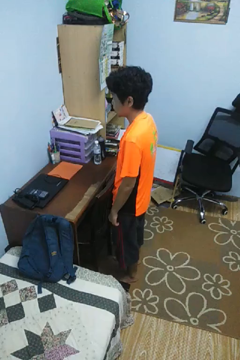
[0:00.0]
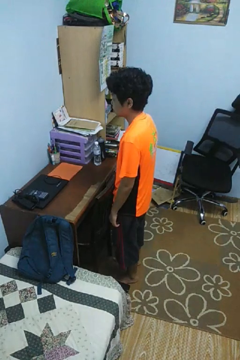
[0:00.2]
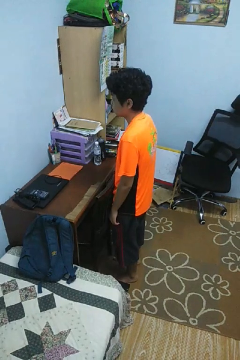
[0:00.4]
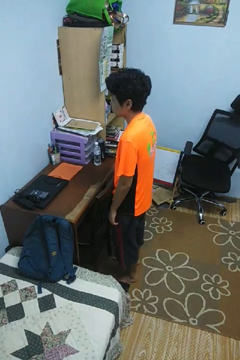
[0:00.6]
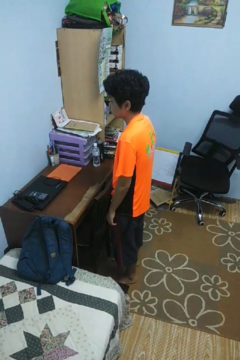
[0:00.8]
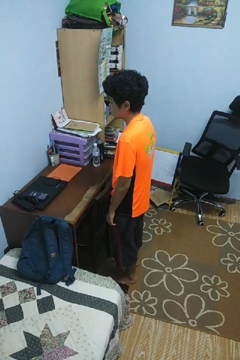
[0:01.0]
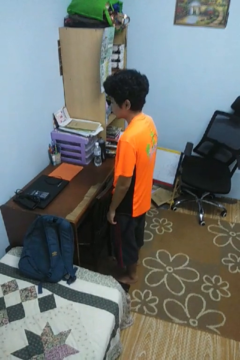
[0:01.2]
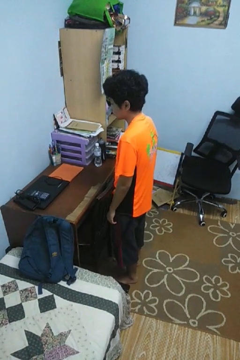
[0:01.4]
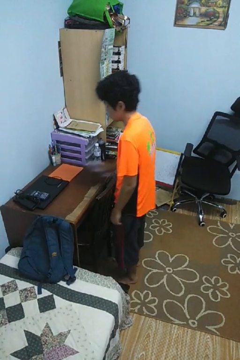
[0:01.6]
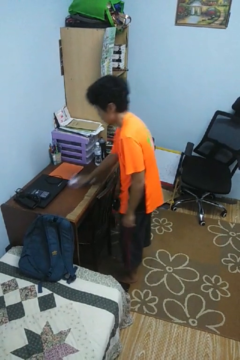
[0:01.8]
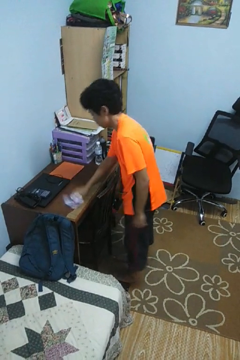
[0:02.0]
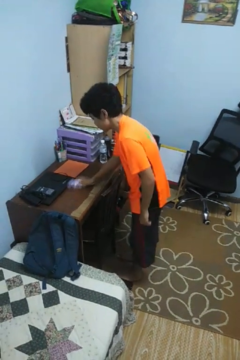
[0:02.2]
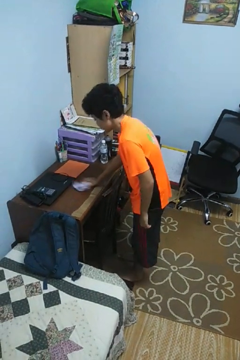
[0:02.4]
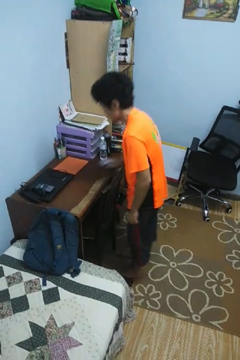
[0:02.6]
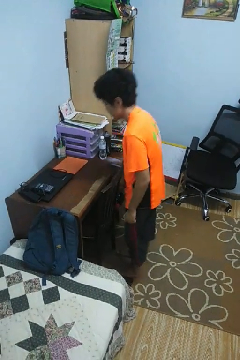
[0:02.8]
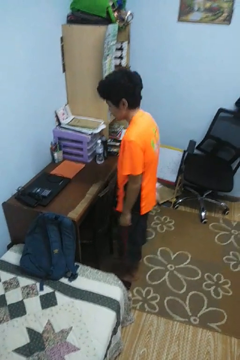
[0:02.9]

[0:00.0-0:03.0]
person cleans table with rag

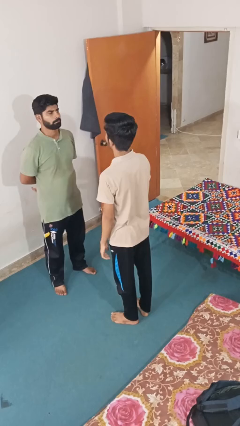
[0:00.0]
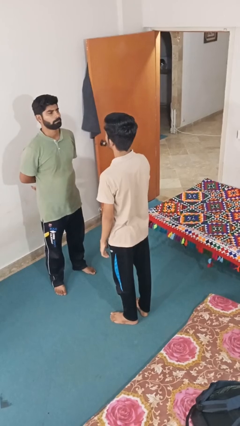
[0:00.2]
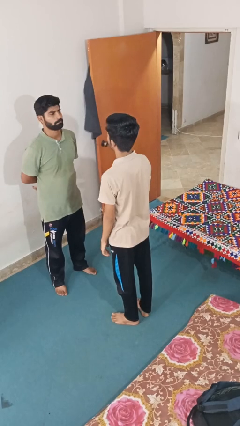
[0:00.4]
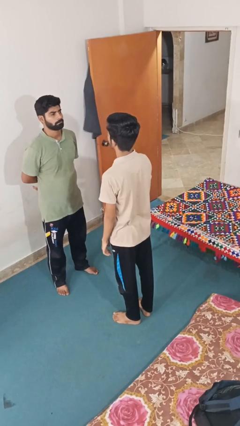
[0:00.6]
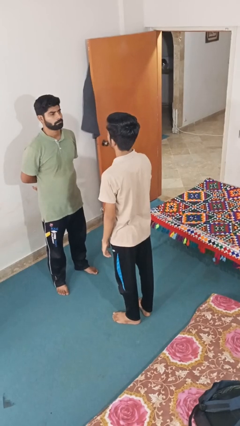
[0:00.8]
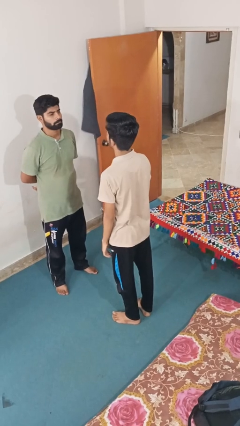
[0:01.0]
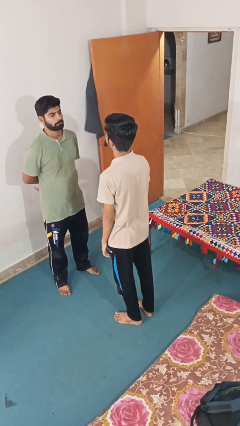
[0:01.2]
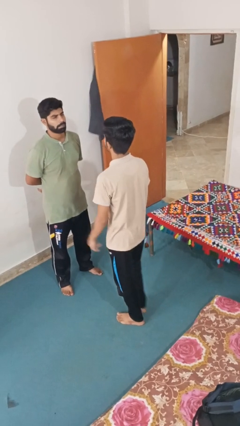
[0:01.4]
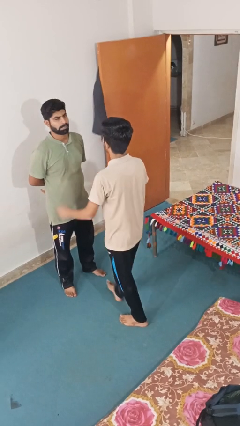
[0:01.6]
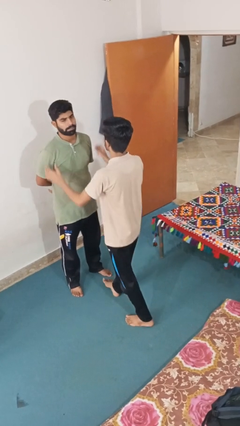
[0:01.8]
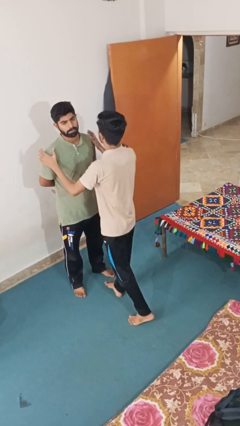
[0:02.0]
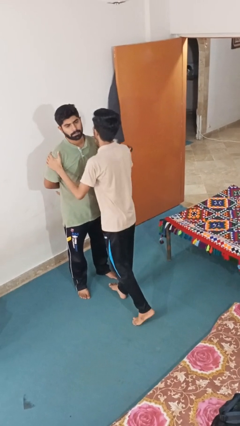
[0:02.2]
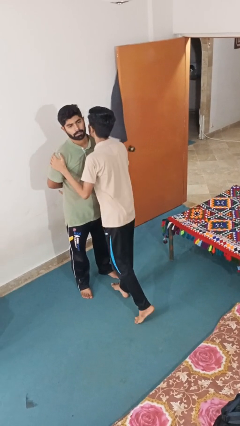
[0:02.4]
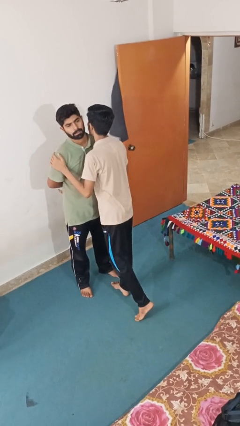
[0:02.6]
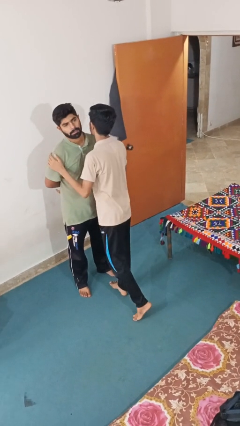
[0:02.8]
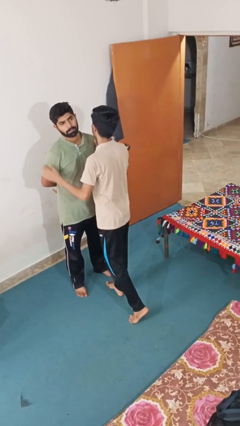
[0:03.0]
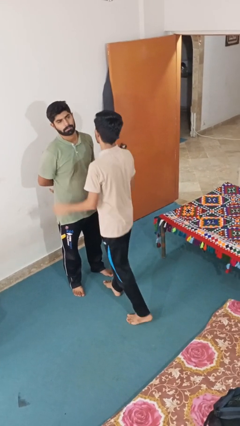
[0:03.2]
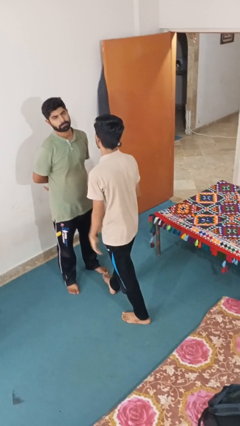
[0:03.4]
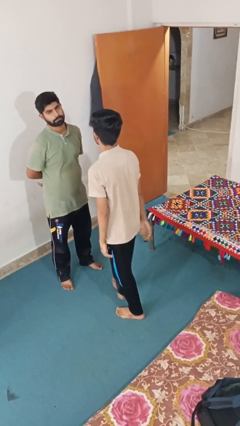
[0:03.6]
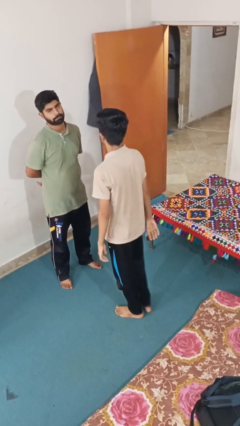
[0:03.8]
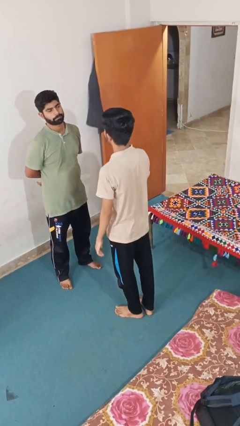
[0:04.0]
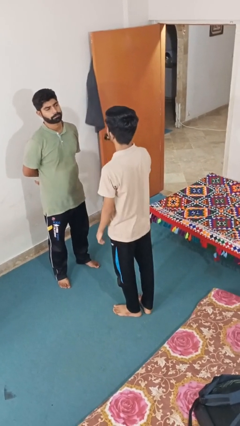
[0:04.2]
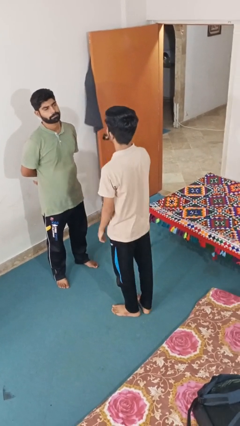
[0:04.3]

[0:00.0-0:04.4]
person kisses cheek of person

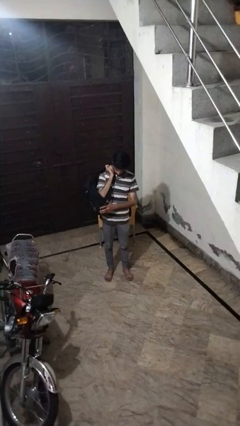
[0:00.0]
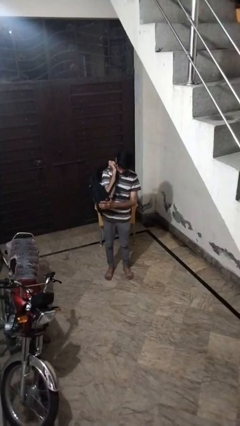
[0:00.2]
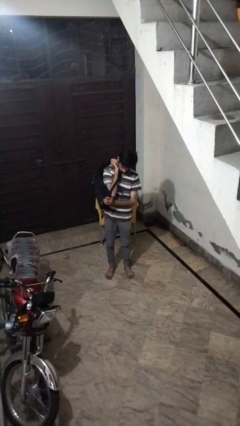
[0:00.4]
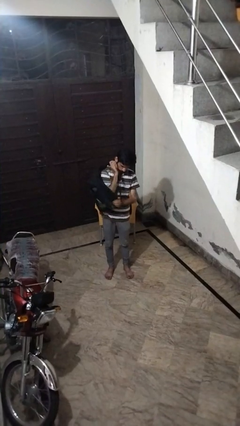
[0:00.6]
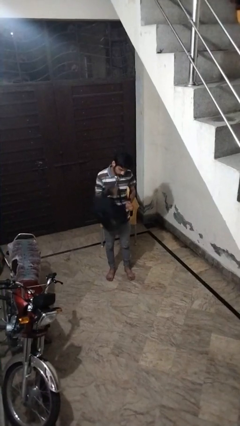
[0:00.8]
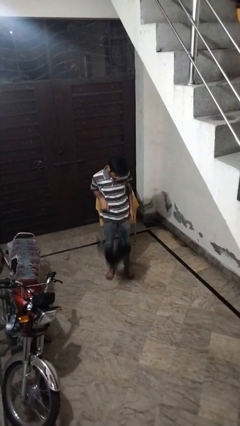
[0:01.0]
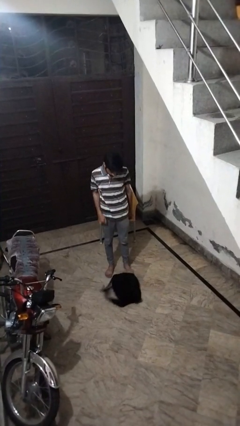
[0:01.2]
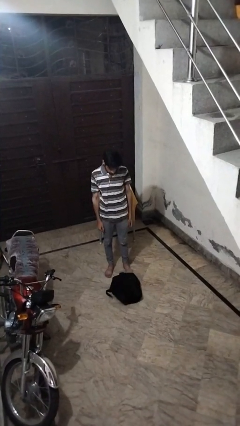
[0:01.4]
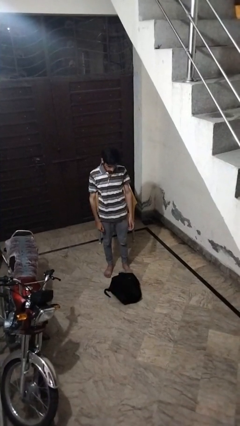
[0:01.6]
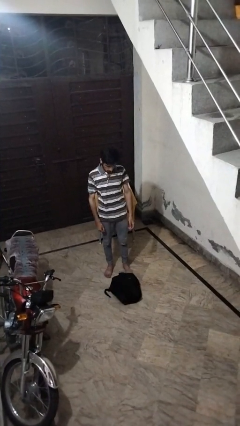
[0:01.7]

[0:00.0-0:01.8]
person drops object

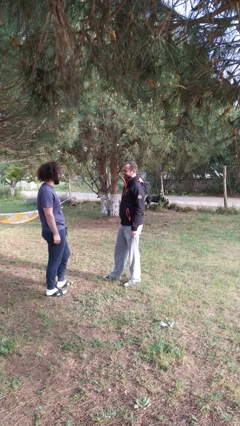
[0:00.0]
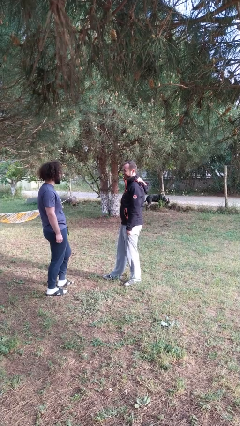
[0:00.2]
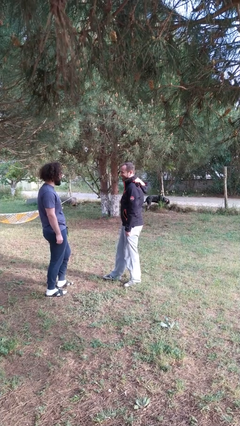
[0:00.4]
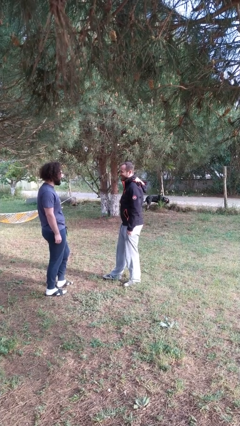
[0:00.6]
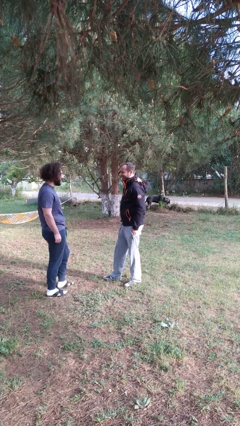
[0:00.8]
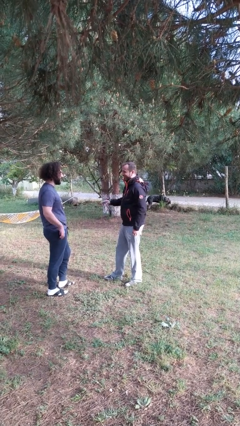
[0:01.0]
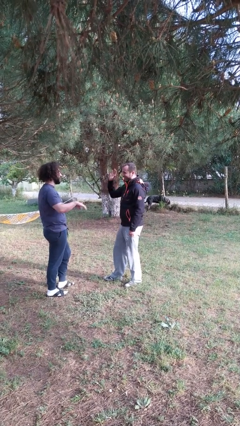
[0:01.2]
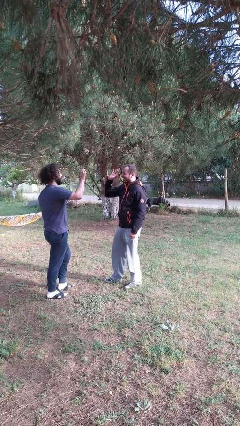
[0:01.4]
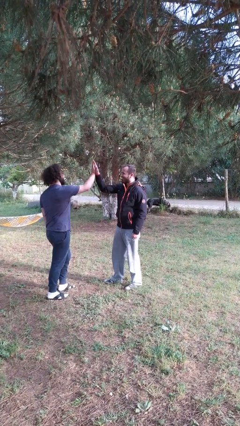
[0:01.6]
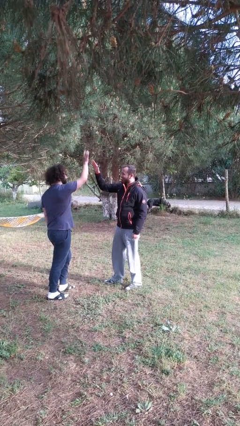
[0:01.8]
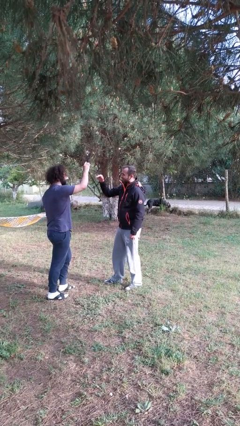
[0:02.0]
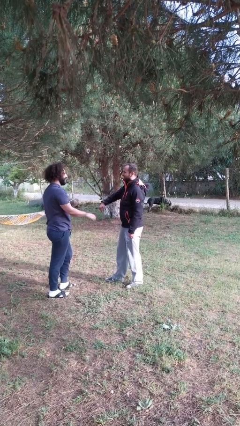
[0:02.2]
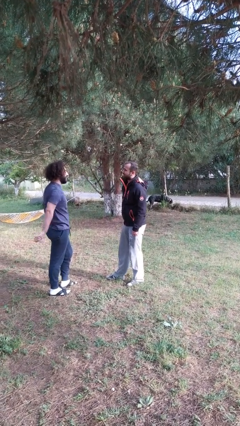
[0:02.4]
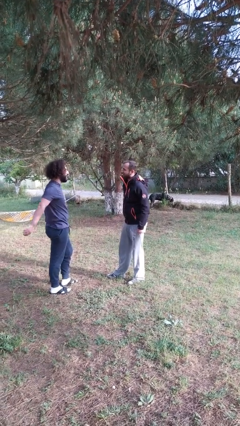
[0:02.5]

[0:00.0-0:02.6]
person highfives hand

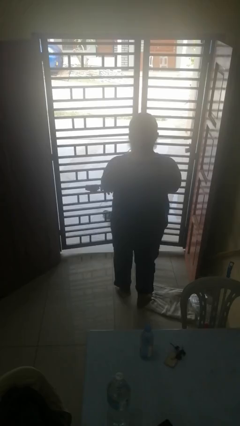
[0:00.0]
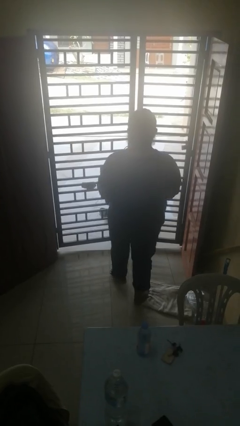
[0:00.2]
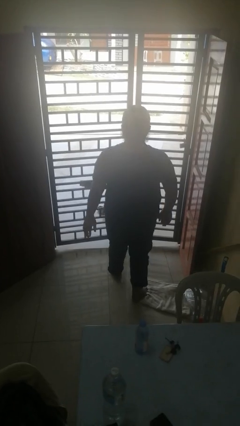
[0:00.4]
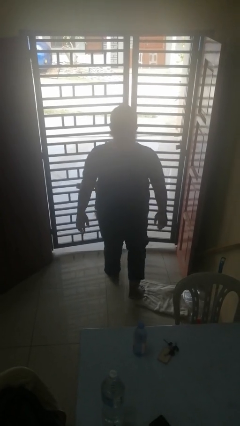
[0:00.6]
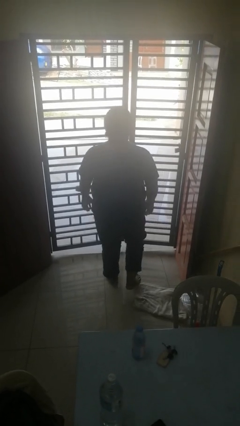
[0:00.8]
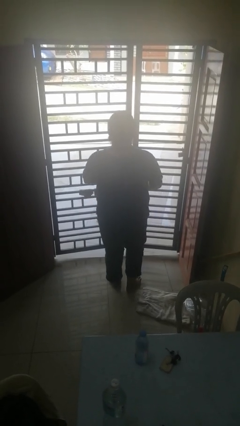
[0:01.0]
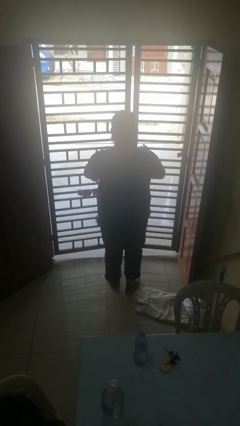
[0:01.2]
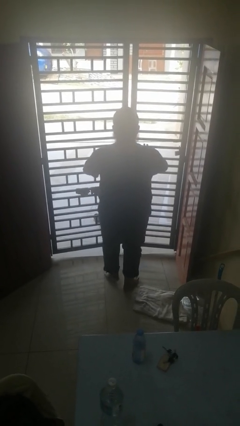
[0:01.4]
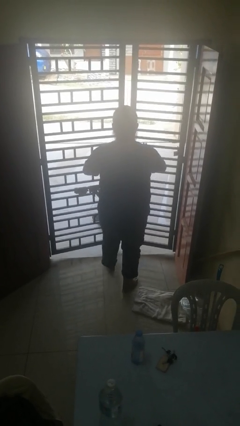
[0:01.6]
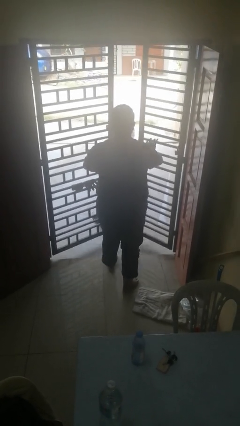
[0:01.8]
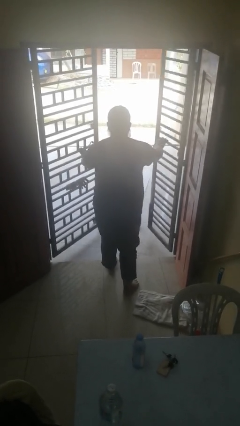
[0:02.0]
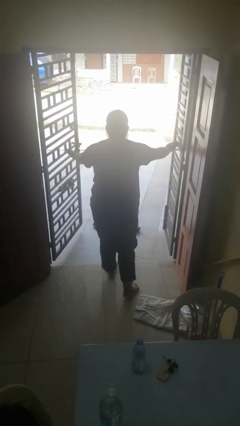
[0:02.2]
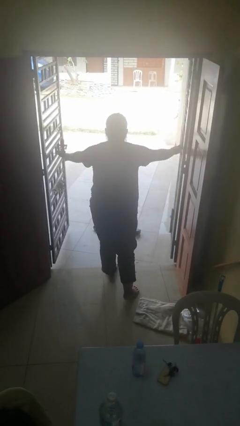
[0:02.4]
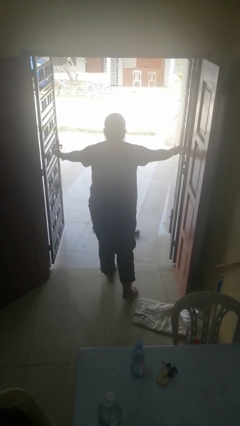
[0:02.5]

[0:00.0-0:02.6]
person opens gate

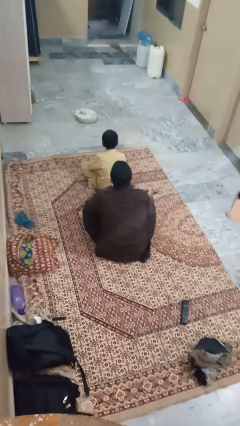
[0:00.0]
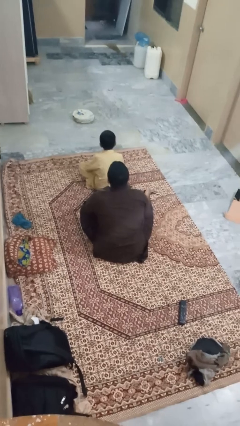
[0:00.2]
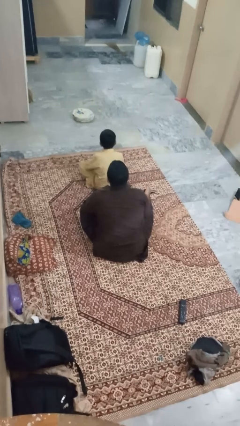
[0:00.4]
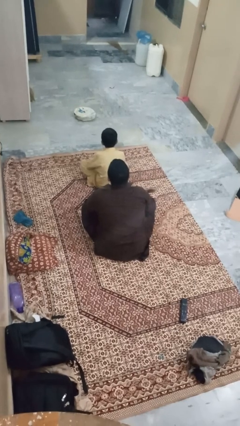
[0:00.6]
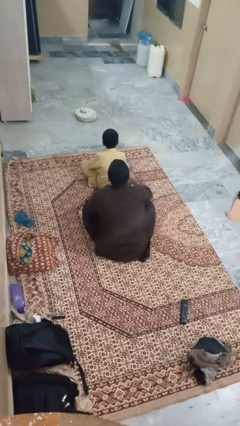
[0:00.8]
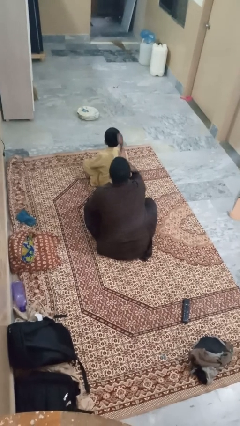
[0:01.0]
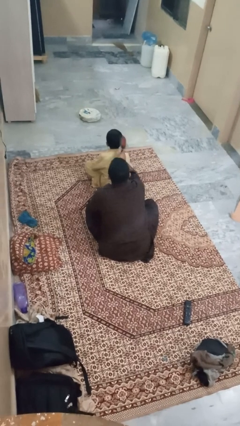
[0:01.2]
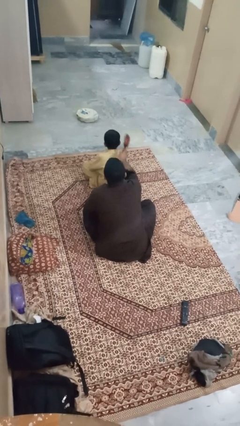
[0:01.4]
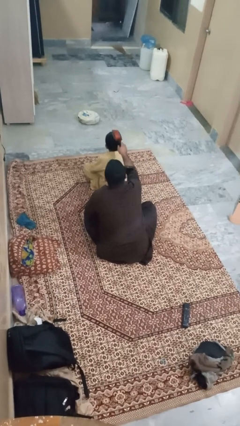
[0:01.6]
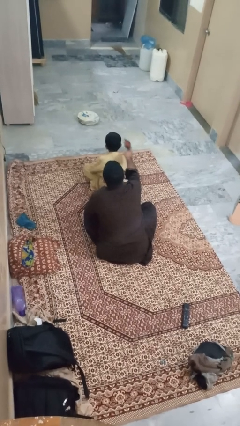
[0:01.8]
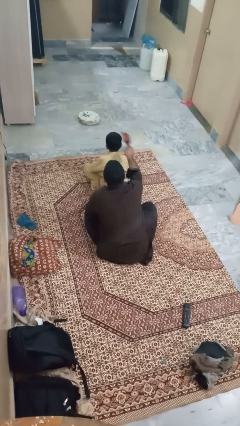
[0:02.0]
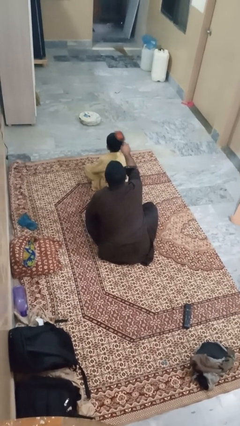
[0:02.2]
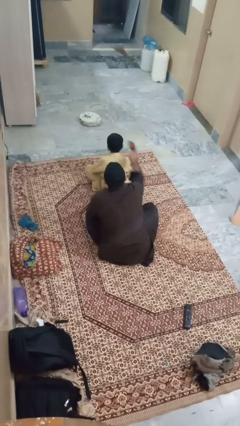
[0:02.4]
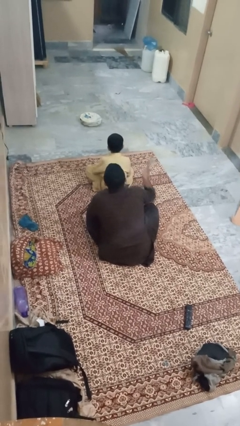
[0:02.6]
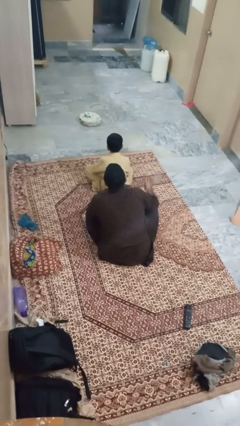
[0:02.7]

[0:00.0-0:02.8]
person brushes hair of person

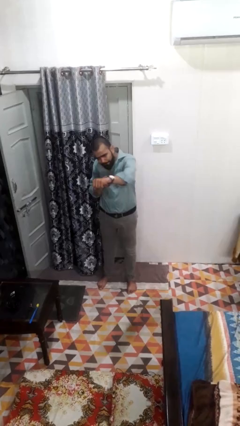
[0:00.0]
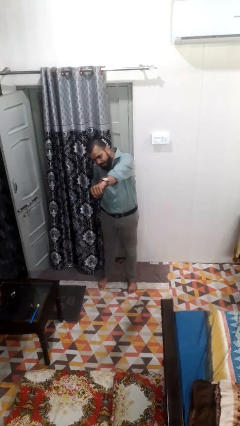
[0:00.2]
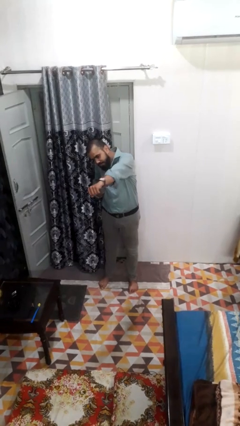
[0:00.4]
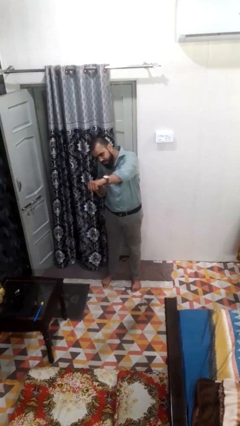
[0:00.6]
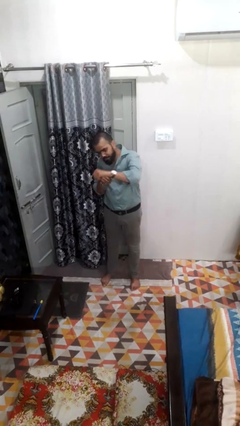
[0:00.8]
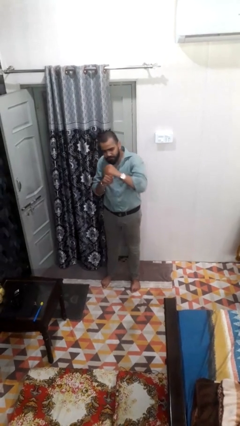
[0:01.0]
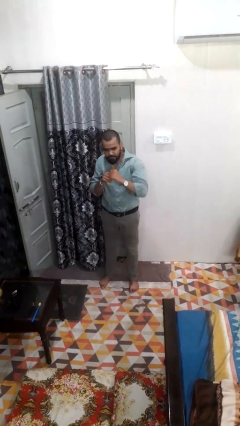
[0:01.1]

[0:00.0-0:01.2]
person punches
